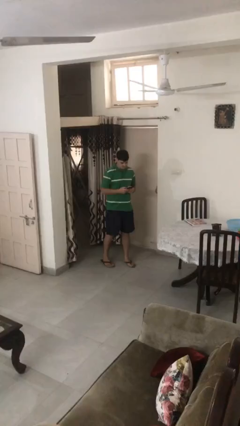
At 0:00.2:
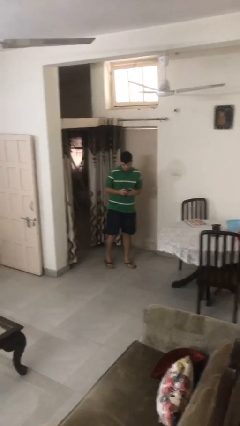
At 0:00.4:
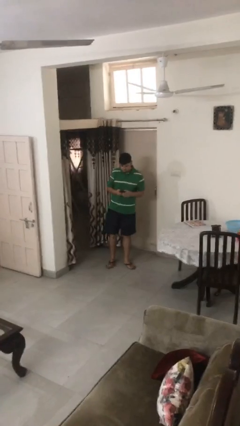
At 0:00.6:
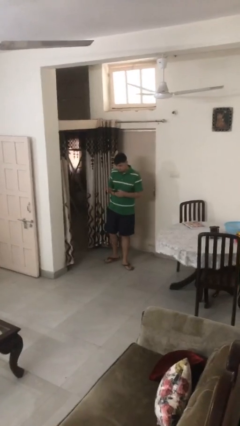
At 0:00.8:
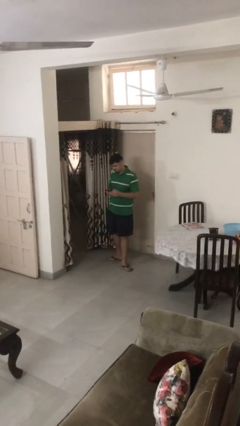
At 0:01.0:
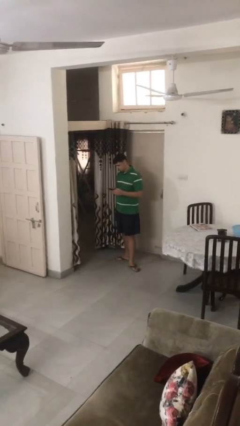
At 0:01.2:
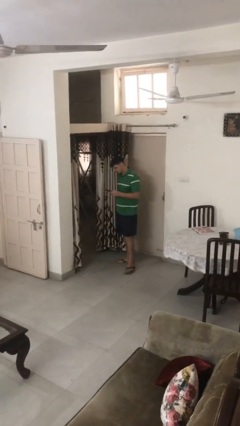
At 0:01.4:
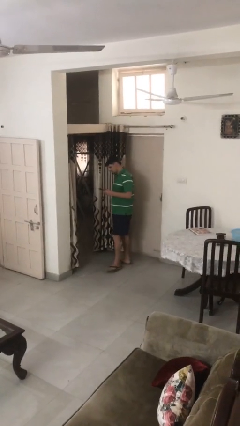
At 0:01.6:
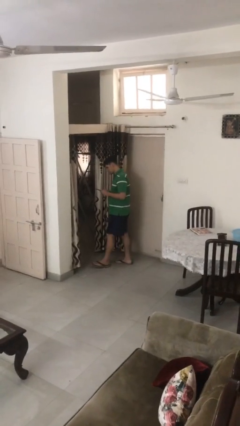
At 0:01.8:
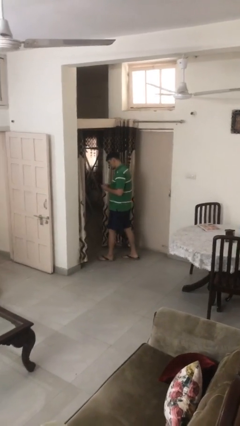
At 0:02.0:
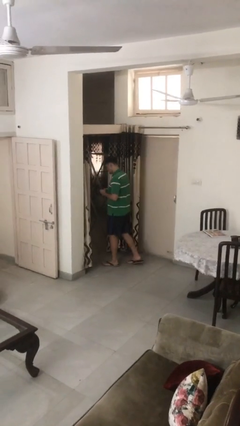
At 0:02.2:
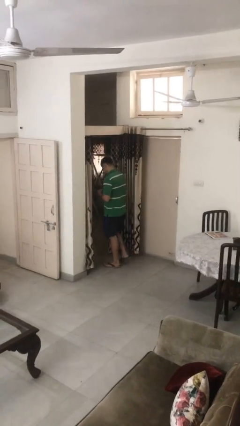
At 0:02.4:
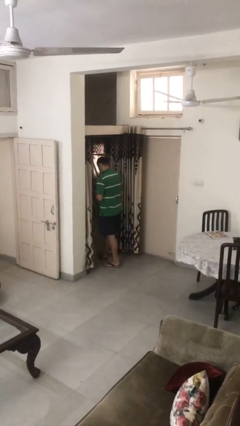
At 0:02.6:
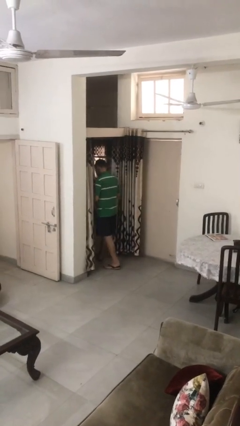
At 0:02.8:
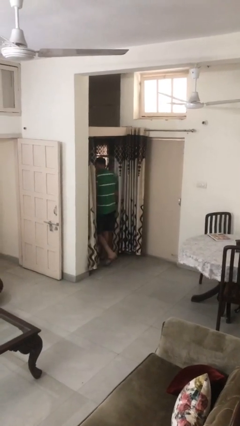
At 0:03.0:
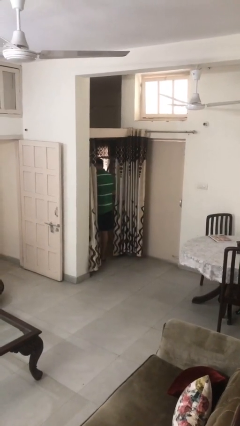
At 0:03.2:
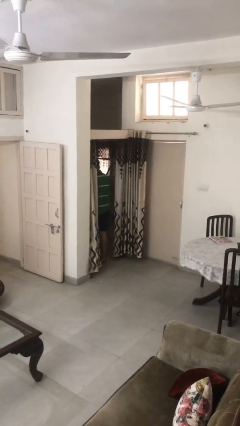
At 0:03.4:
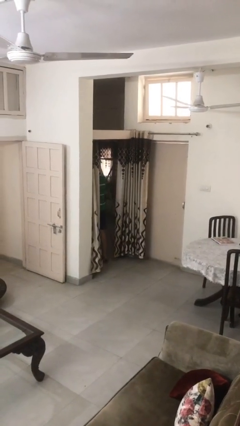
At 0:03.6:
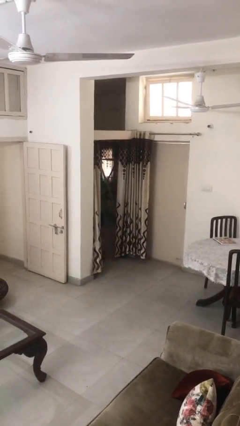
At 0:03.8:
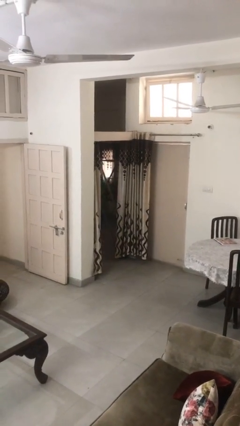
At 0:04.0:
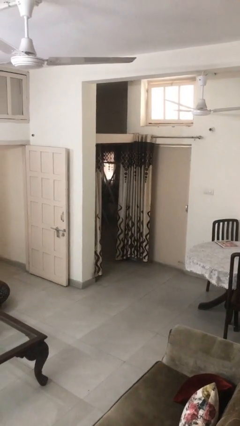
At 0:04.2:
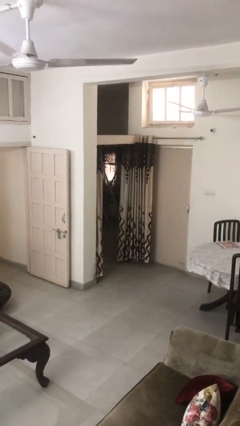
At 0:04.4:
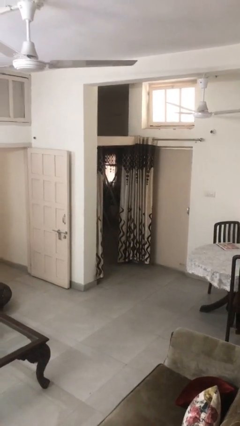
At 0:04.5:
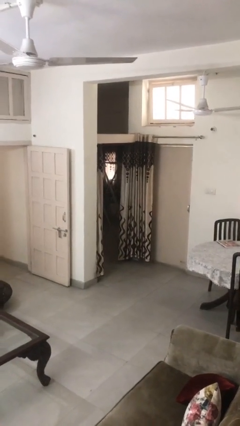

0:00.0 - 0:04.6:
person exits scene through structure

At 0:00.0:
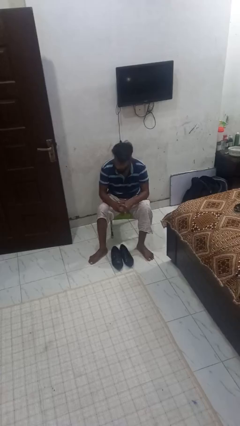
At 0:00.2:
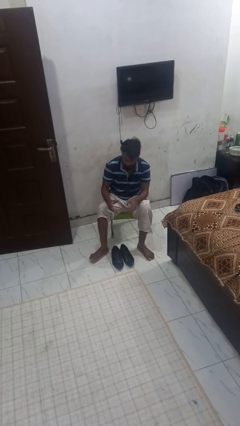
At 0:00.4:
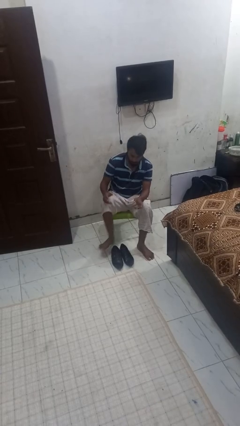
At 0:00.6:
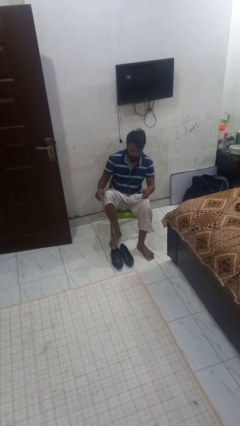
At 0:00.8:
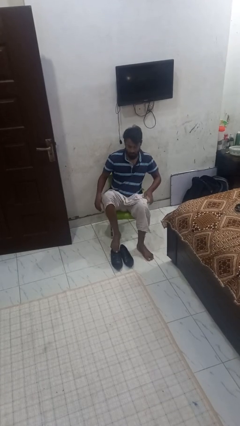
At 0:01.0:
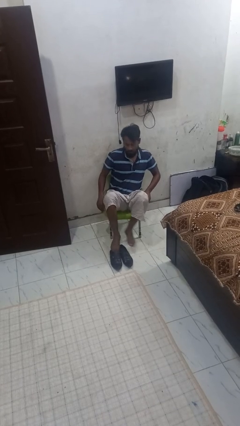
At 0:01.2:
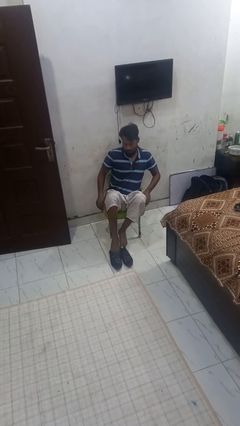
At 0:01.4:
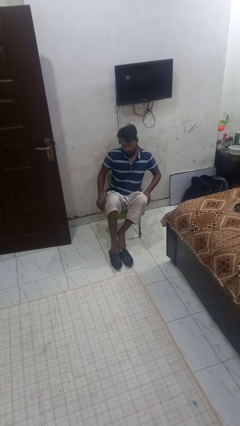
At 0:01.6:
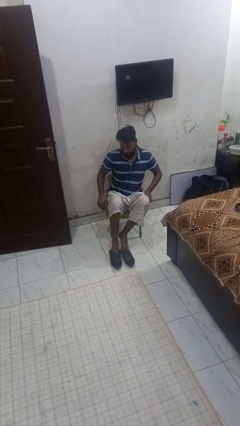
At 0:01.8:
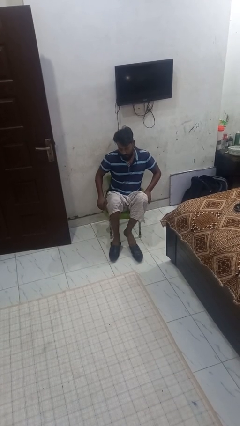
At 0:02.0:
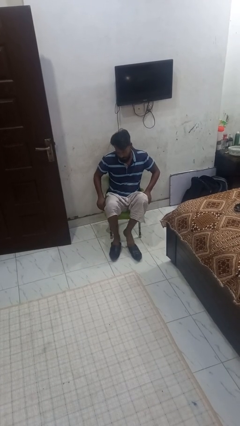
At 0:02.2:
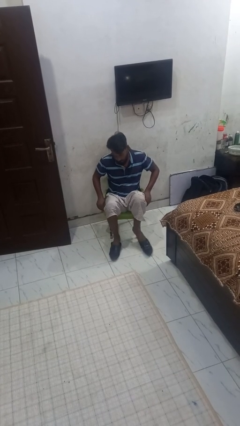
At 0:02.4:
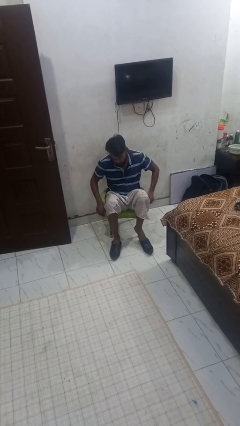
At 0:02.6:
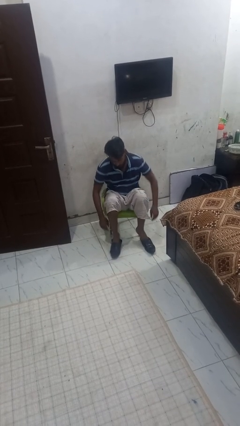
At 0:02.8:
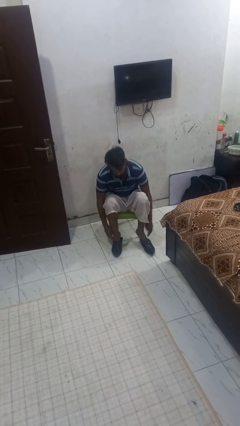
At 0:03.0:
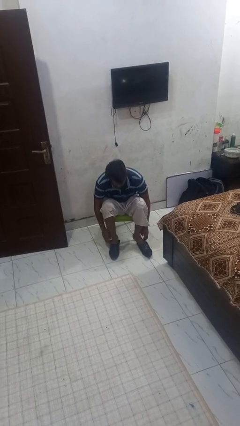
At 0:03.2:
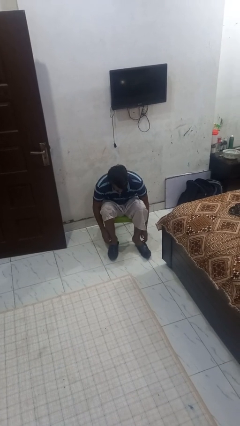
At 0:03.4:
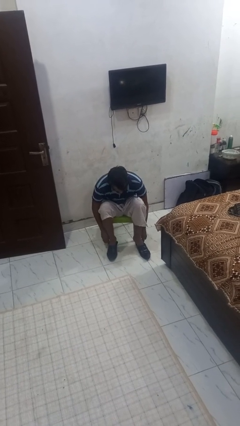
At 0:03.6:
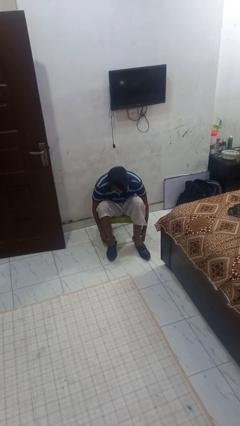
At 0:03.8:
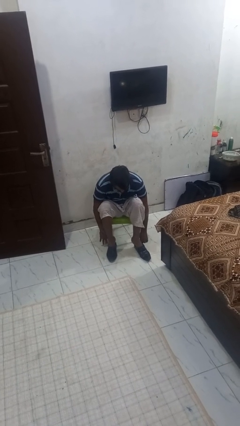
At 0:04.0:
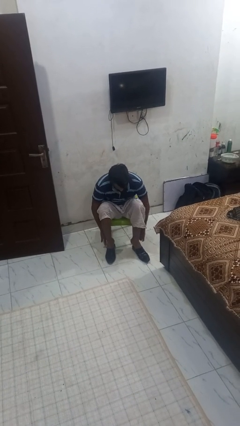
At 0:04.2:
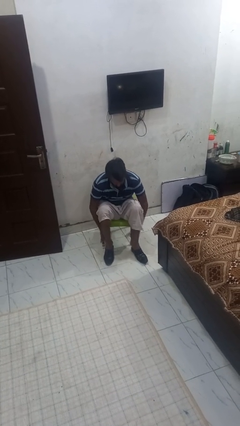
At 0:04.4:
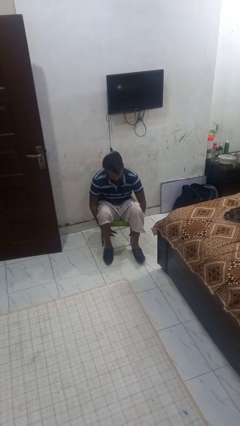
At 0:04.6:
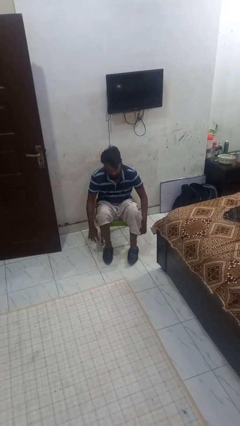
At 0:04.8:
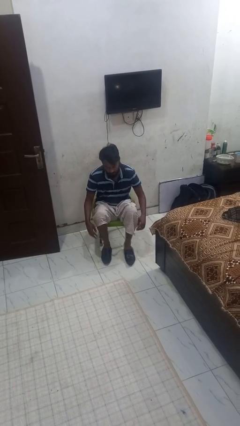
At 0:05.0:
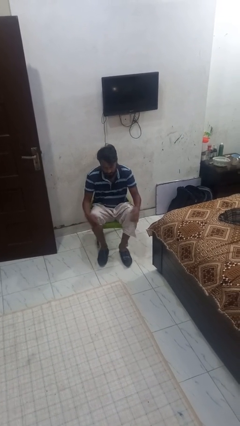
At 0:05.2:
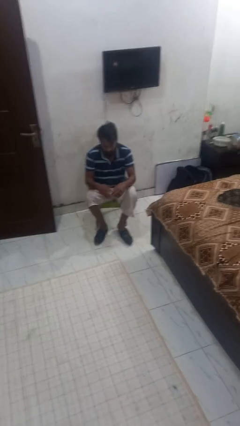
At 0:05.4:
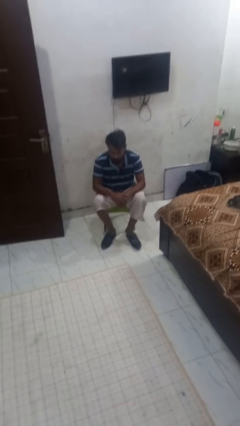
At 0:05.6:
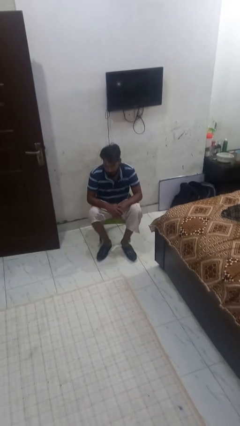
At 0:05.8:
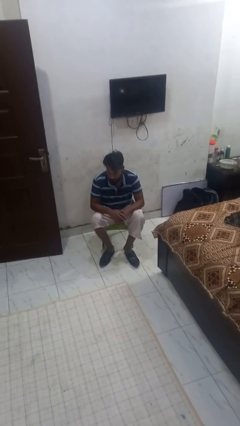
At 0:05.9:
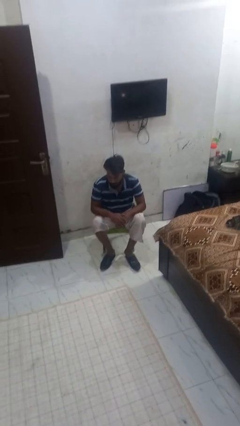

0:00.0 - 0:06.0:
person puts on shoes

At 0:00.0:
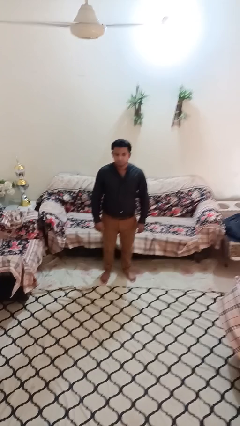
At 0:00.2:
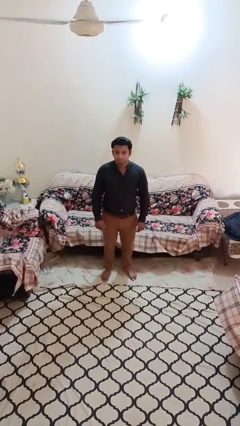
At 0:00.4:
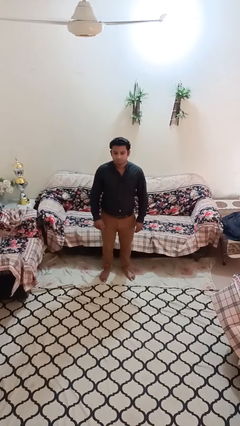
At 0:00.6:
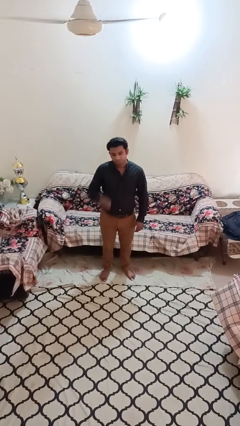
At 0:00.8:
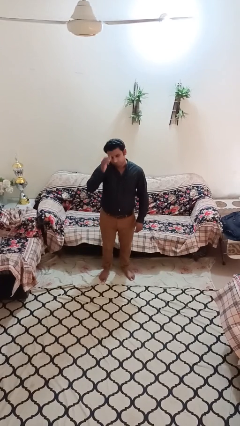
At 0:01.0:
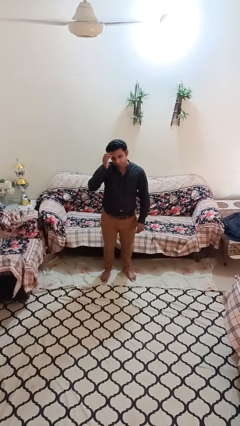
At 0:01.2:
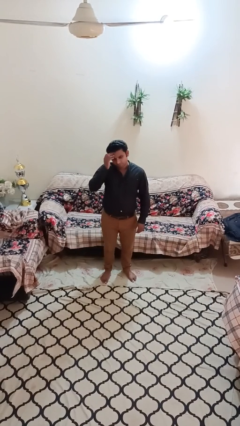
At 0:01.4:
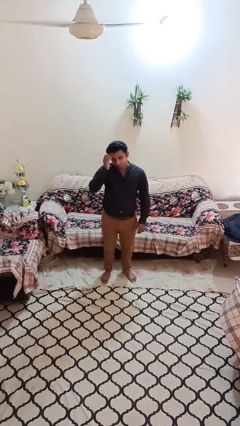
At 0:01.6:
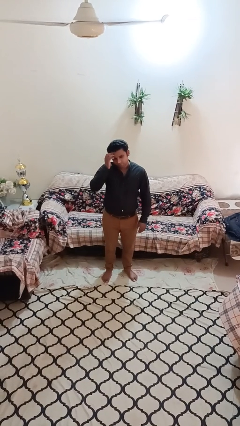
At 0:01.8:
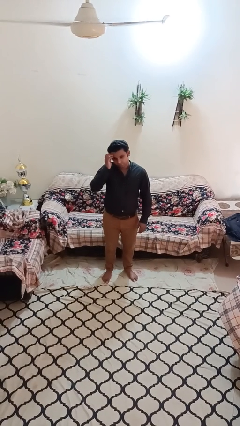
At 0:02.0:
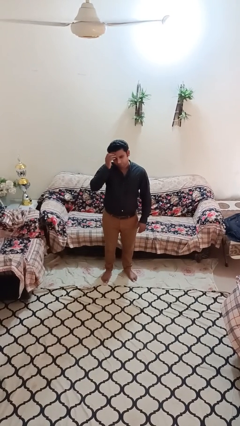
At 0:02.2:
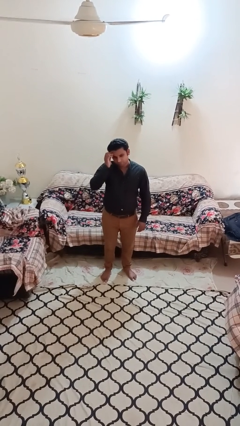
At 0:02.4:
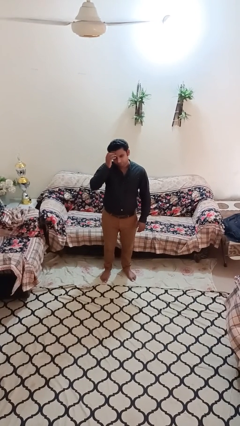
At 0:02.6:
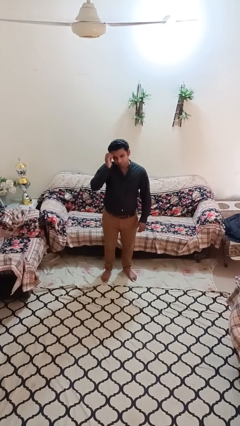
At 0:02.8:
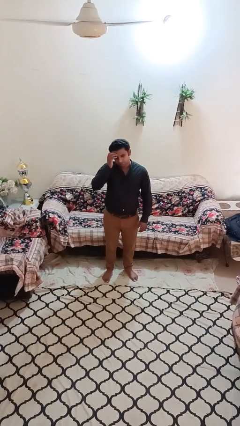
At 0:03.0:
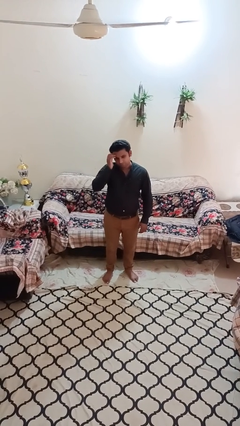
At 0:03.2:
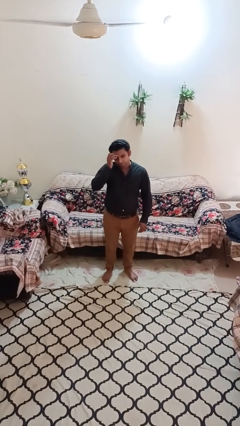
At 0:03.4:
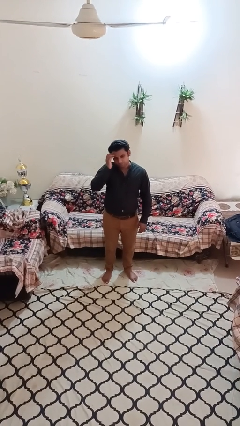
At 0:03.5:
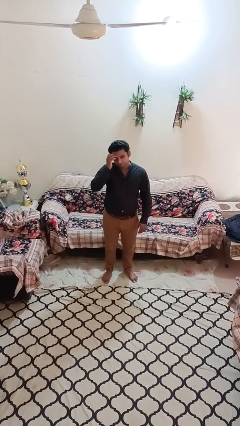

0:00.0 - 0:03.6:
person scratches face

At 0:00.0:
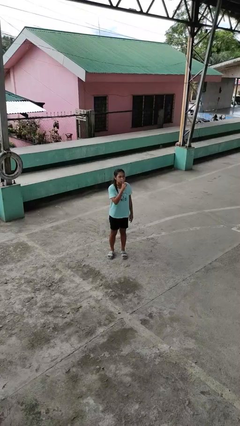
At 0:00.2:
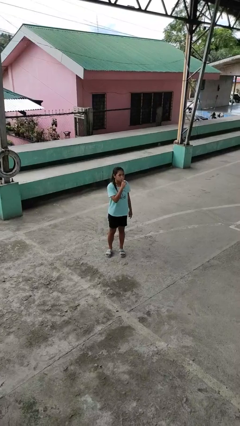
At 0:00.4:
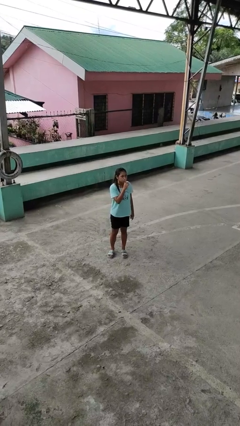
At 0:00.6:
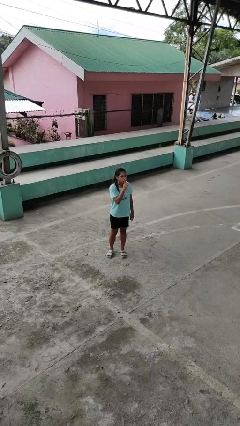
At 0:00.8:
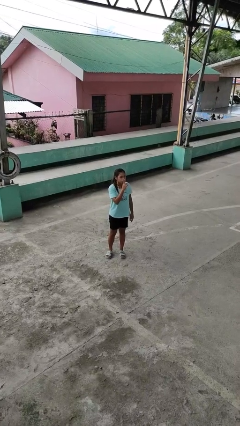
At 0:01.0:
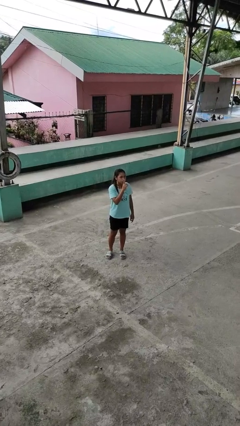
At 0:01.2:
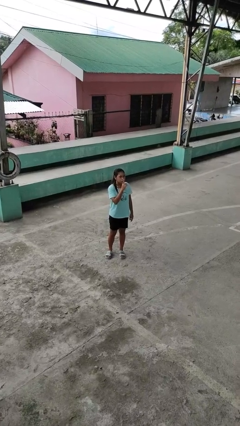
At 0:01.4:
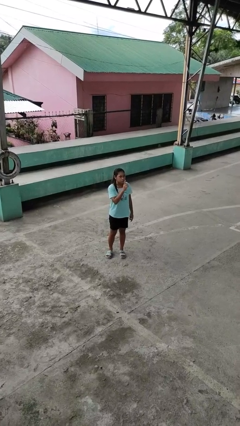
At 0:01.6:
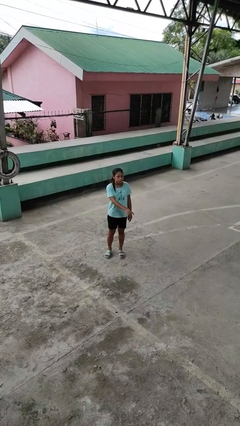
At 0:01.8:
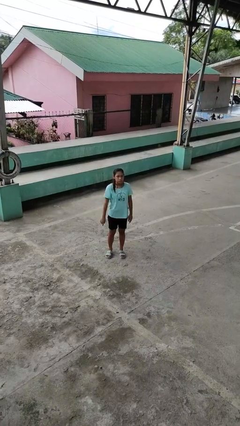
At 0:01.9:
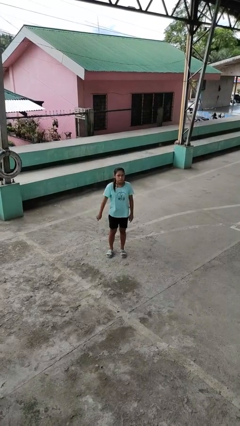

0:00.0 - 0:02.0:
person gestures be quiet

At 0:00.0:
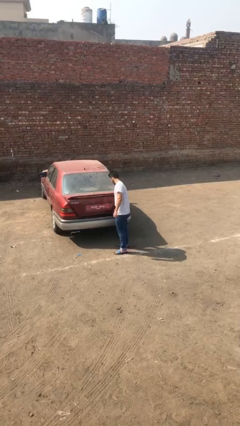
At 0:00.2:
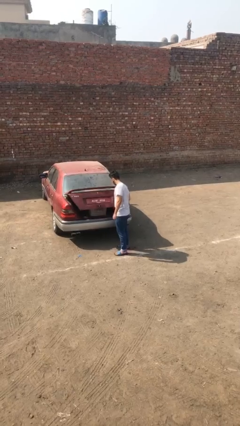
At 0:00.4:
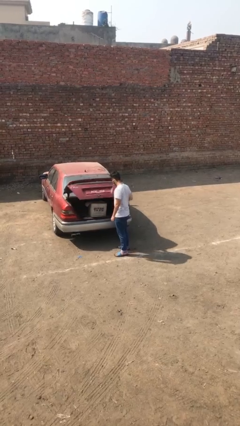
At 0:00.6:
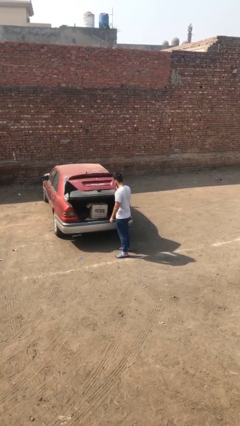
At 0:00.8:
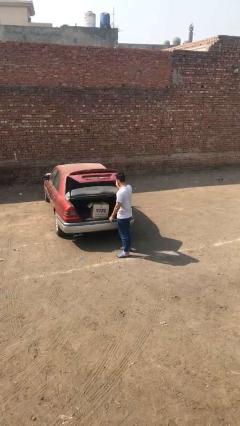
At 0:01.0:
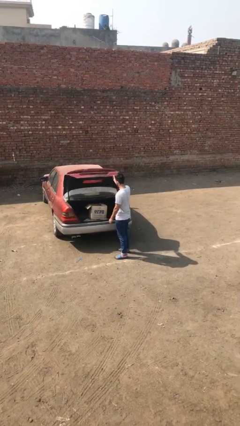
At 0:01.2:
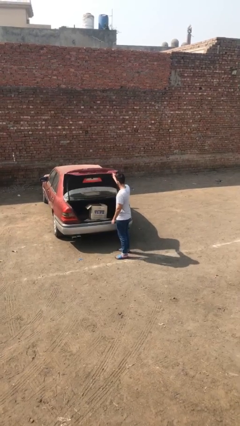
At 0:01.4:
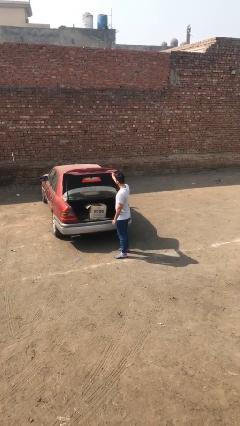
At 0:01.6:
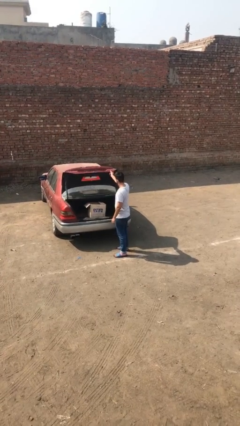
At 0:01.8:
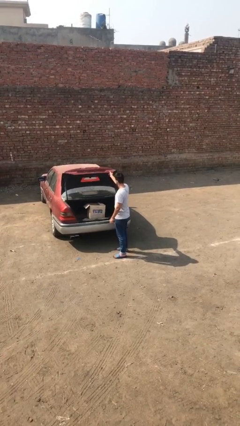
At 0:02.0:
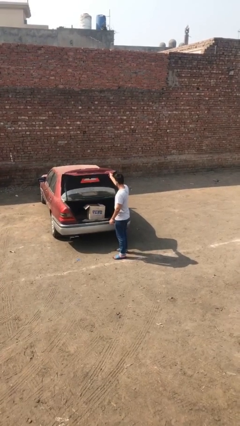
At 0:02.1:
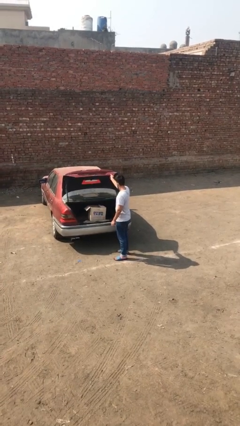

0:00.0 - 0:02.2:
person opens car trunk
